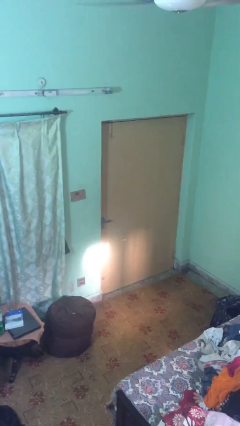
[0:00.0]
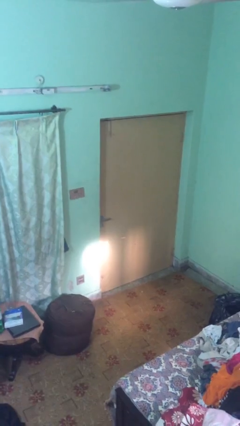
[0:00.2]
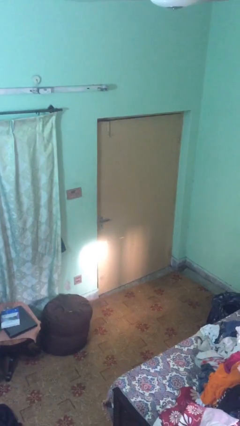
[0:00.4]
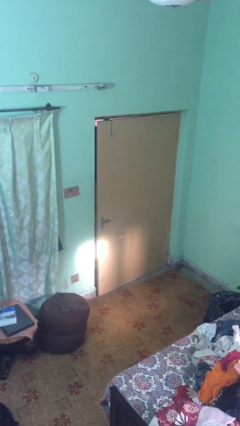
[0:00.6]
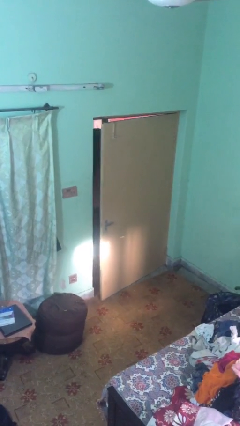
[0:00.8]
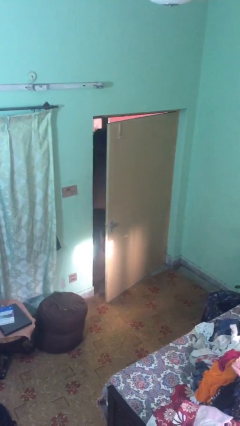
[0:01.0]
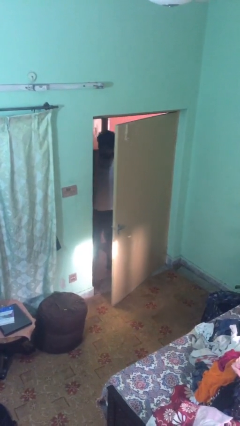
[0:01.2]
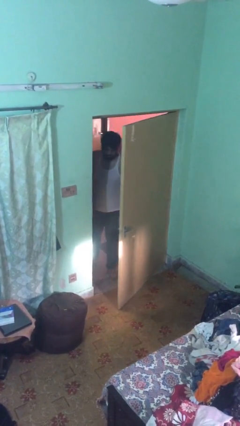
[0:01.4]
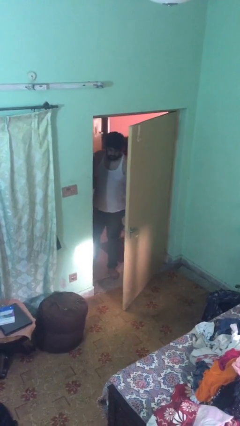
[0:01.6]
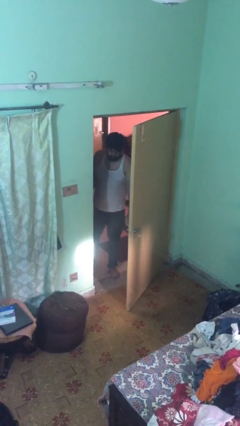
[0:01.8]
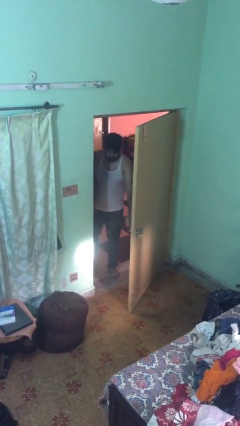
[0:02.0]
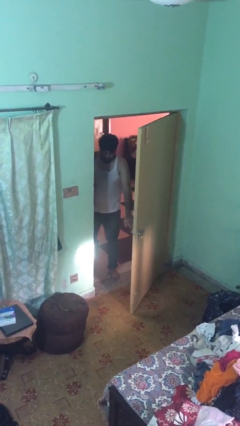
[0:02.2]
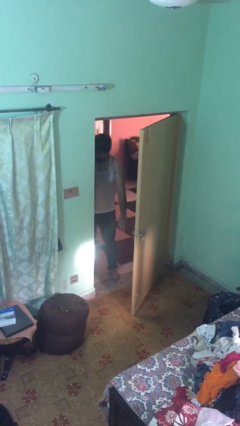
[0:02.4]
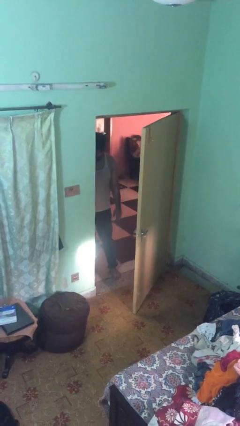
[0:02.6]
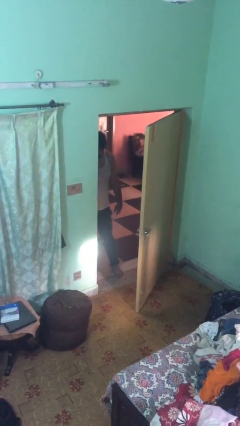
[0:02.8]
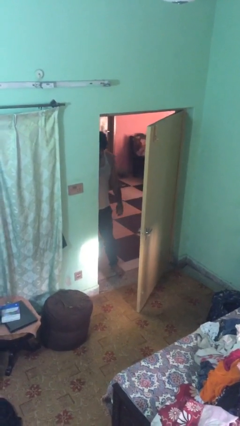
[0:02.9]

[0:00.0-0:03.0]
person opens facility door

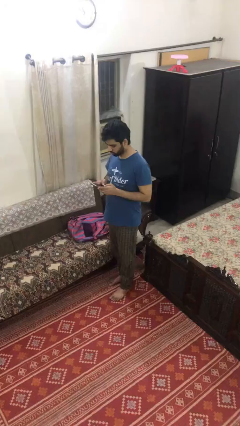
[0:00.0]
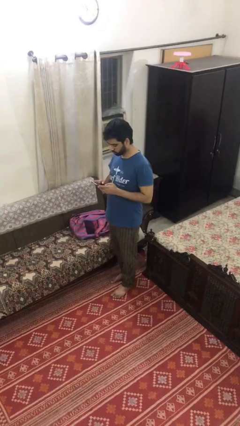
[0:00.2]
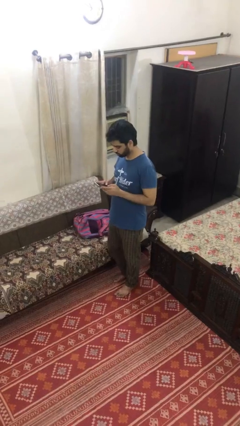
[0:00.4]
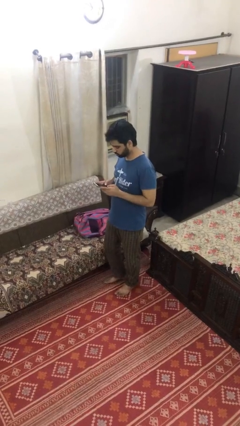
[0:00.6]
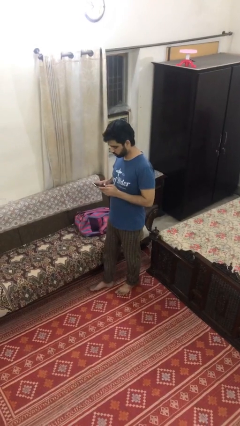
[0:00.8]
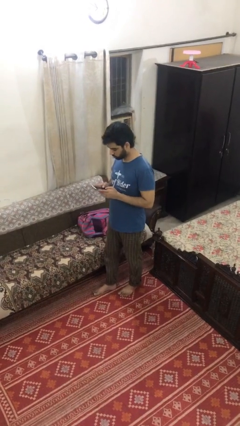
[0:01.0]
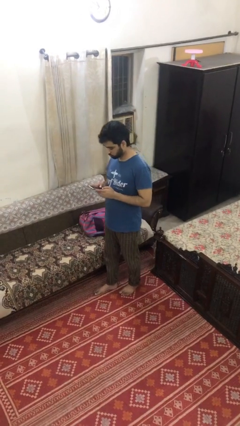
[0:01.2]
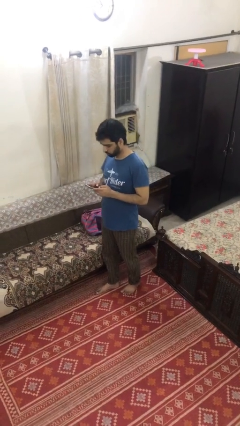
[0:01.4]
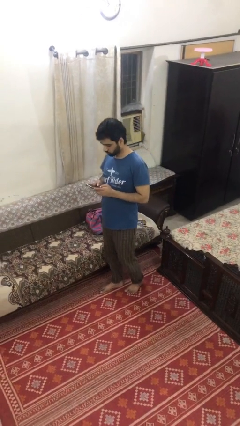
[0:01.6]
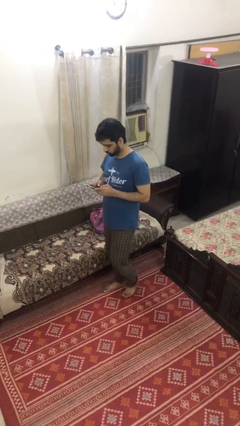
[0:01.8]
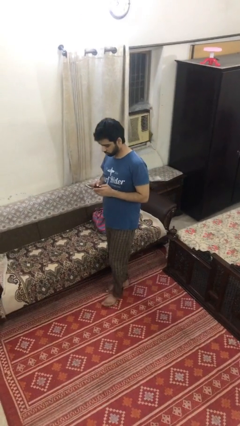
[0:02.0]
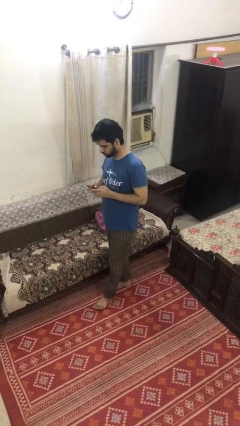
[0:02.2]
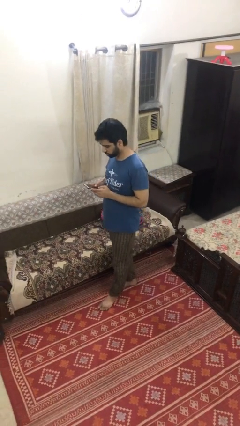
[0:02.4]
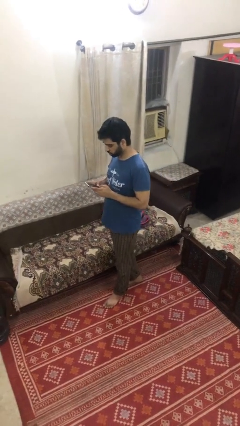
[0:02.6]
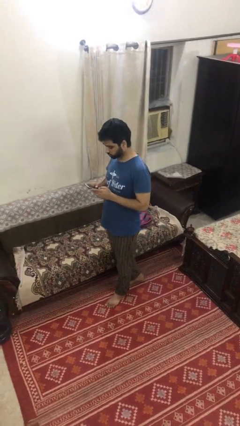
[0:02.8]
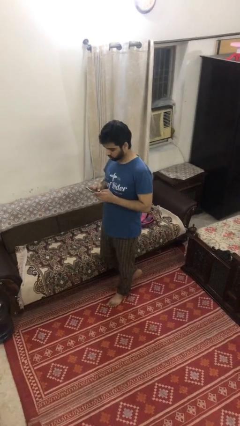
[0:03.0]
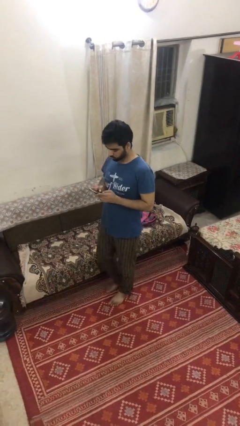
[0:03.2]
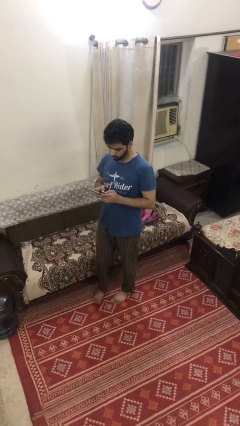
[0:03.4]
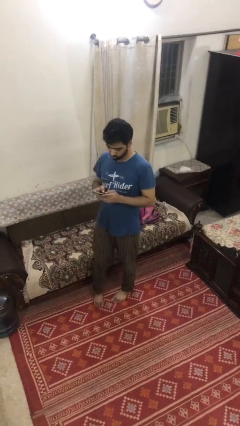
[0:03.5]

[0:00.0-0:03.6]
person texts on phone

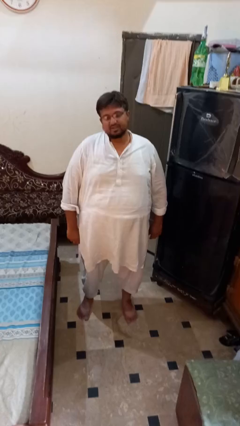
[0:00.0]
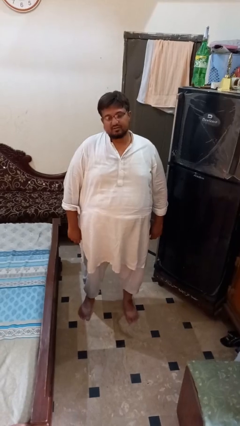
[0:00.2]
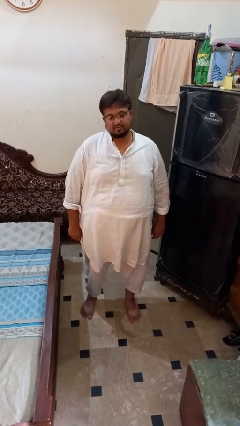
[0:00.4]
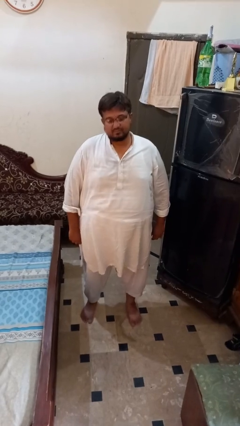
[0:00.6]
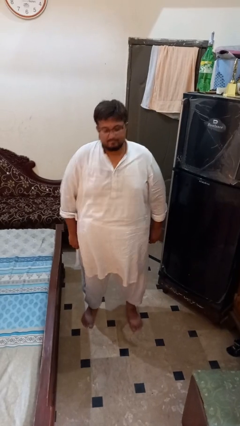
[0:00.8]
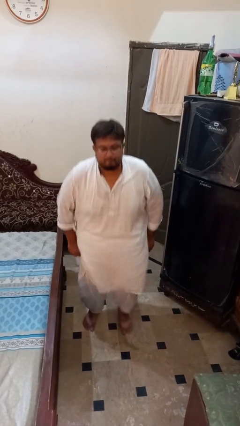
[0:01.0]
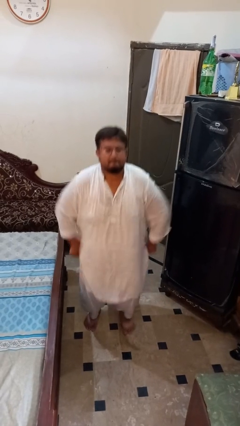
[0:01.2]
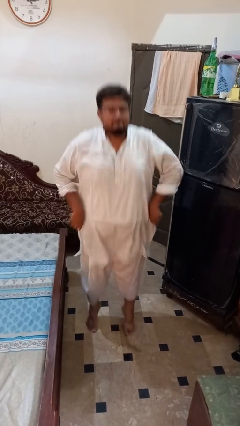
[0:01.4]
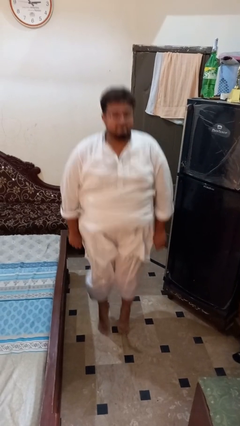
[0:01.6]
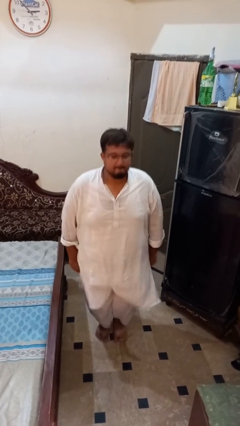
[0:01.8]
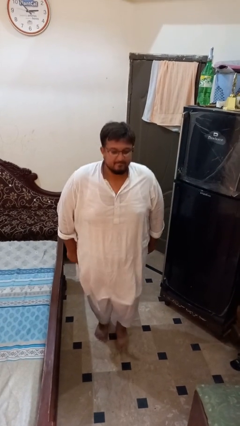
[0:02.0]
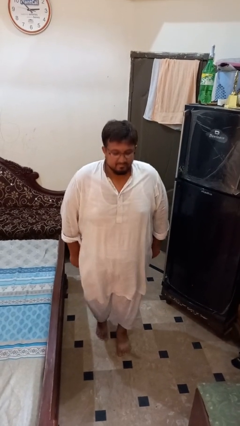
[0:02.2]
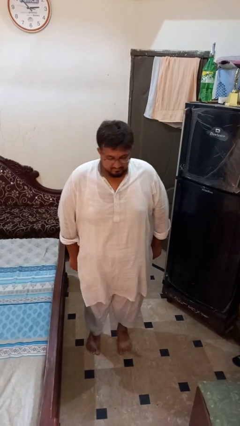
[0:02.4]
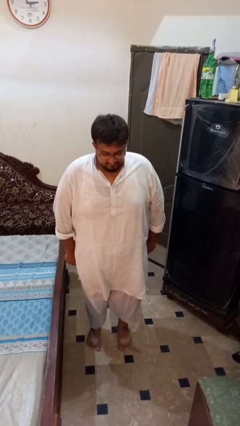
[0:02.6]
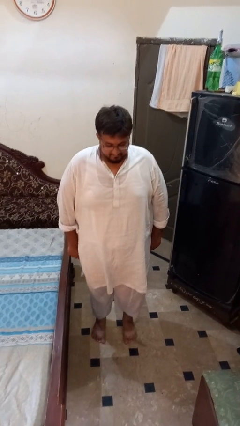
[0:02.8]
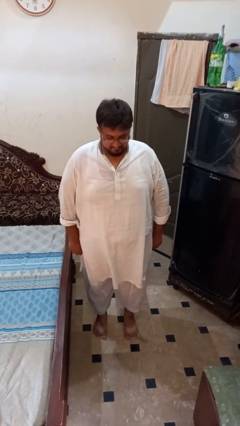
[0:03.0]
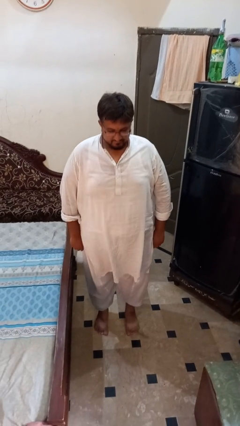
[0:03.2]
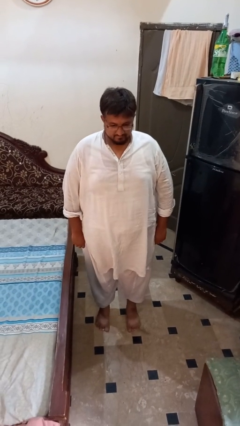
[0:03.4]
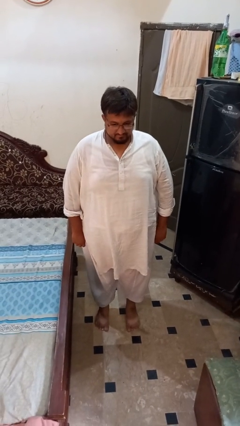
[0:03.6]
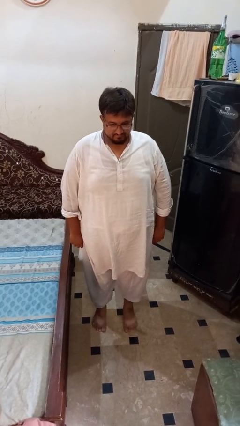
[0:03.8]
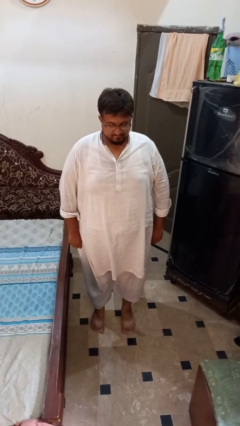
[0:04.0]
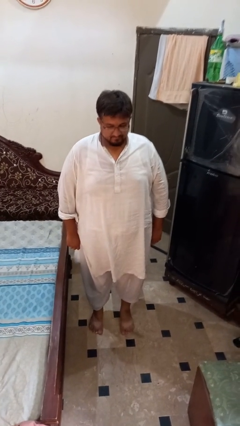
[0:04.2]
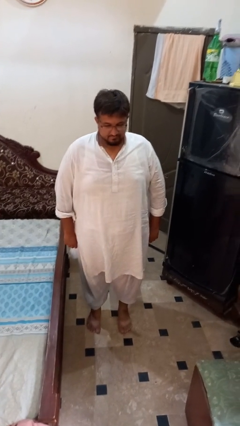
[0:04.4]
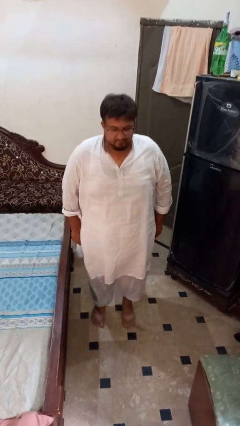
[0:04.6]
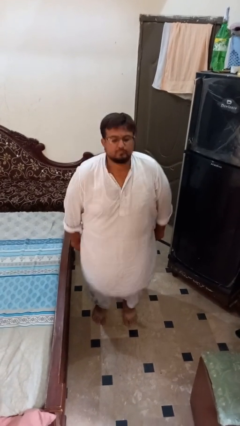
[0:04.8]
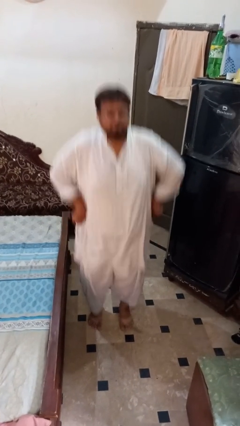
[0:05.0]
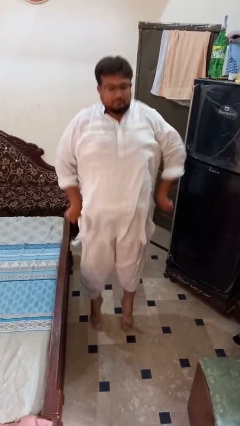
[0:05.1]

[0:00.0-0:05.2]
person jumps

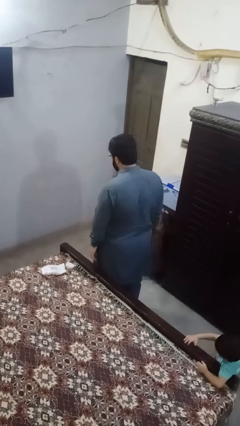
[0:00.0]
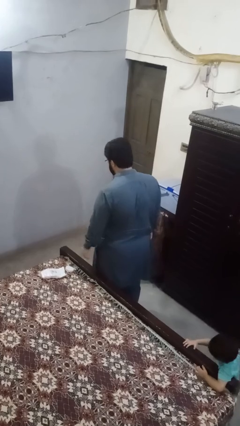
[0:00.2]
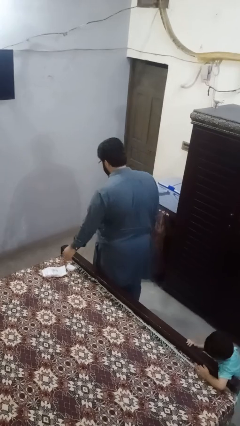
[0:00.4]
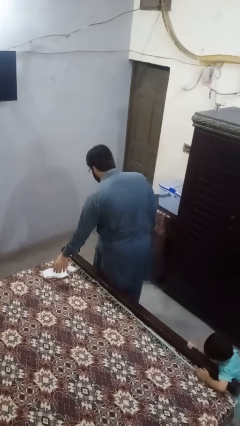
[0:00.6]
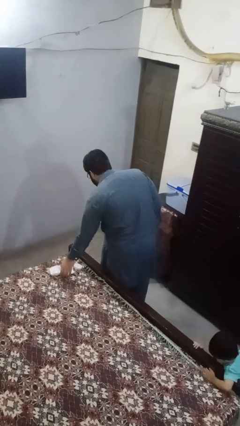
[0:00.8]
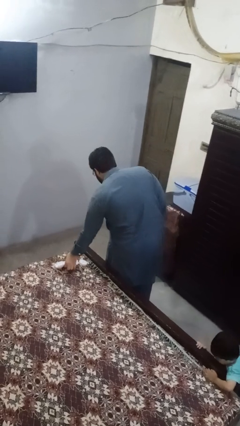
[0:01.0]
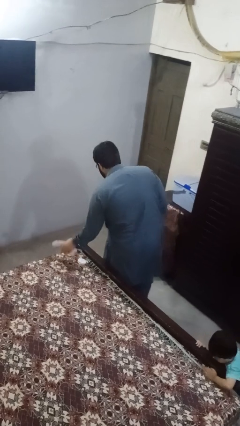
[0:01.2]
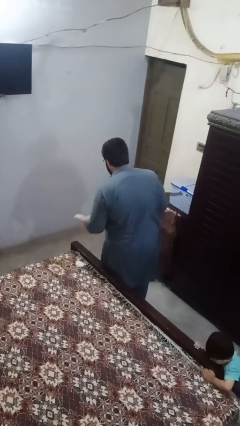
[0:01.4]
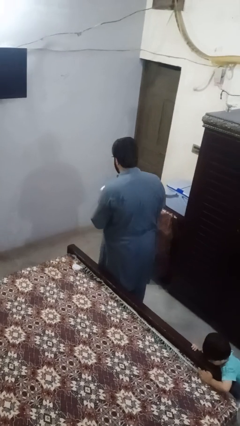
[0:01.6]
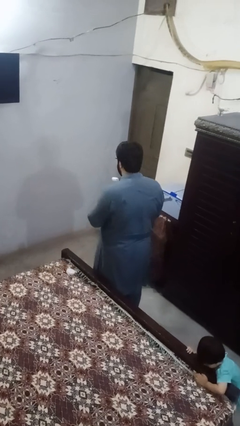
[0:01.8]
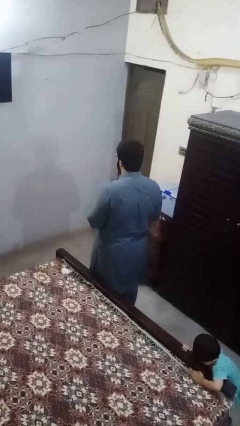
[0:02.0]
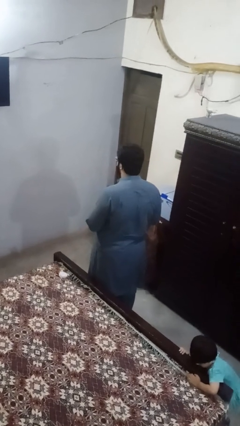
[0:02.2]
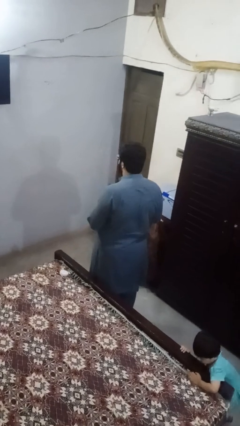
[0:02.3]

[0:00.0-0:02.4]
person picks up object from bed

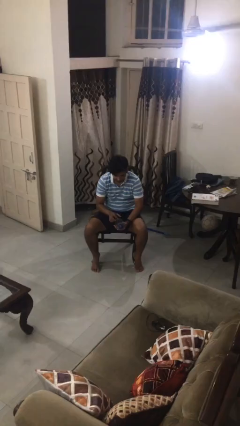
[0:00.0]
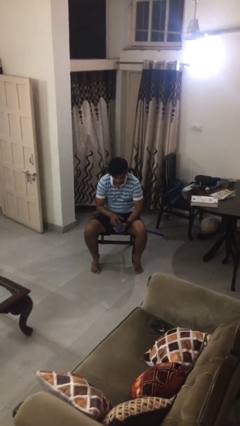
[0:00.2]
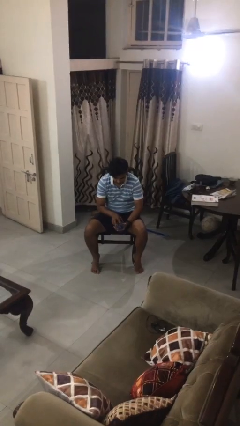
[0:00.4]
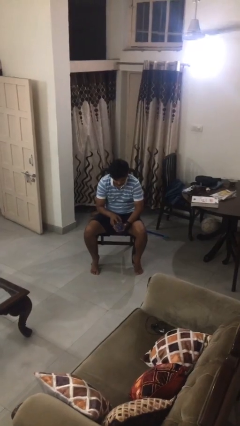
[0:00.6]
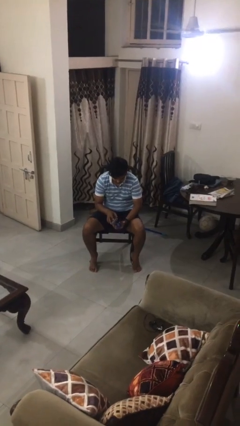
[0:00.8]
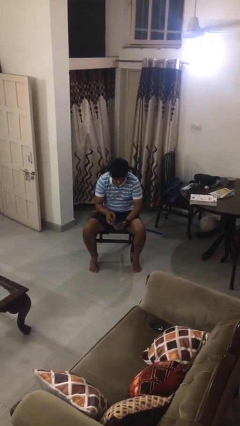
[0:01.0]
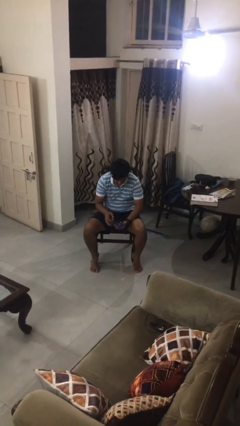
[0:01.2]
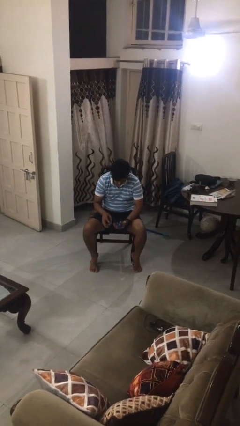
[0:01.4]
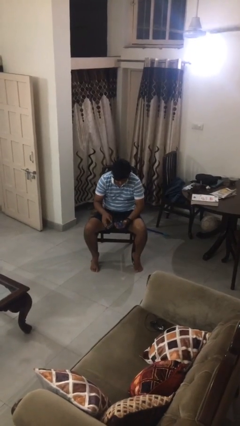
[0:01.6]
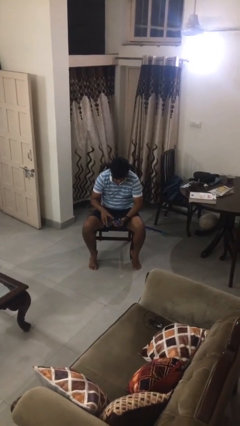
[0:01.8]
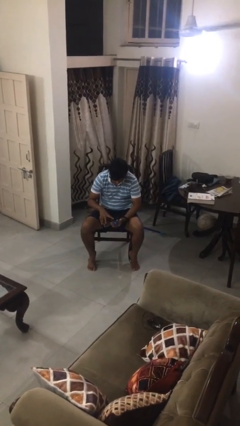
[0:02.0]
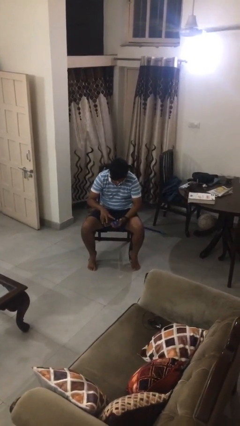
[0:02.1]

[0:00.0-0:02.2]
person opens jewelry box

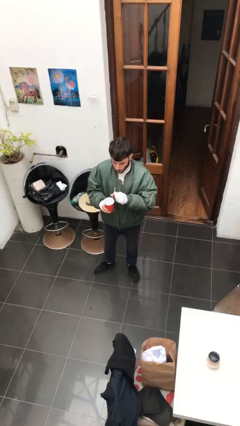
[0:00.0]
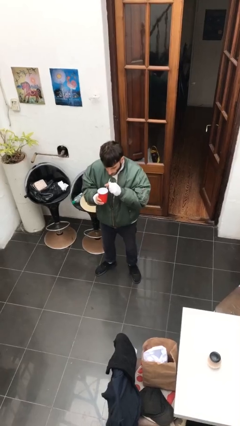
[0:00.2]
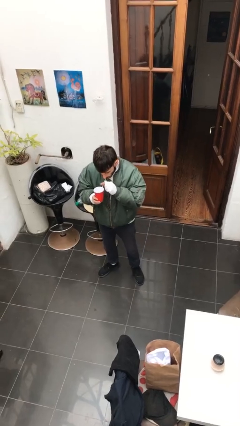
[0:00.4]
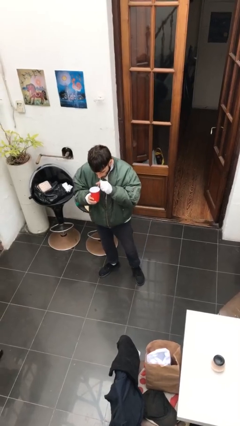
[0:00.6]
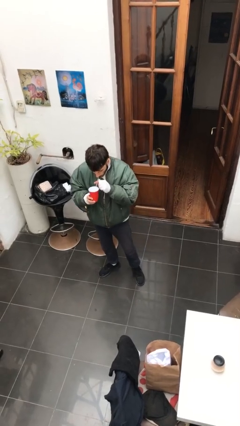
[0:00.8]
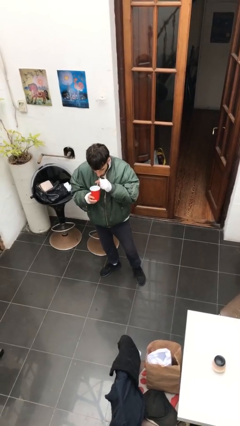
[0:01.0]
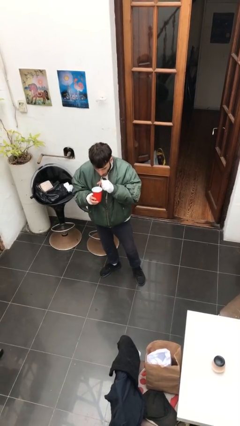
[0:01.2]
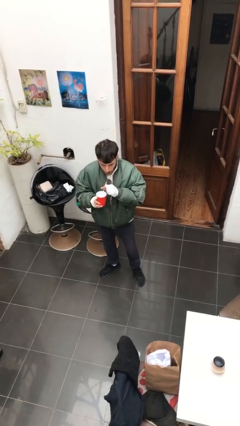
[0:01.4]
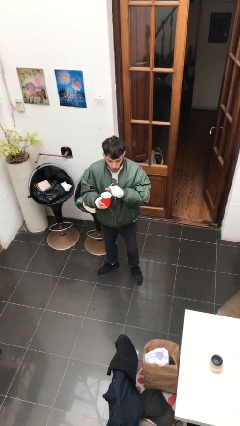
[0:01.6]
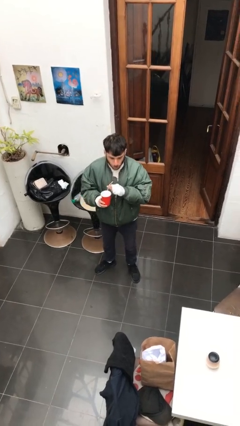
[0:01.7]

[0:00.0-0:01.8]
person drinks from straw
